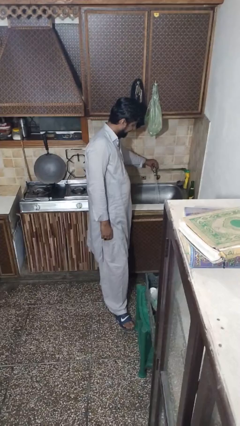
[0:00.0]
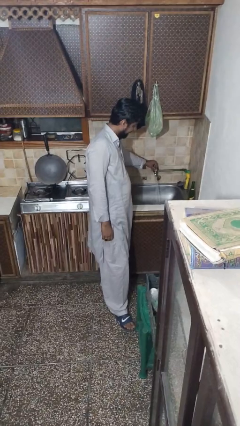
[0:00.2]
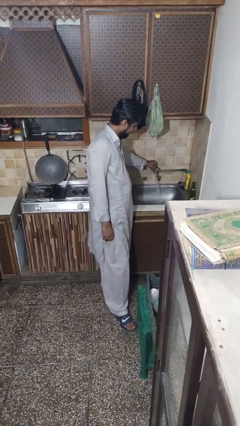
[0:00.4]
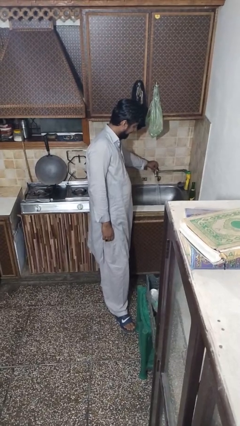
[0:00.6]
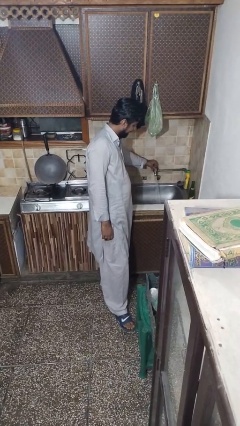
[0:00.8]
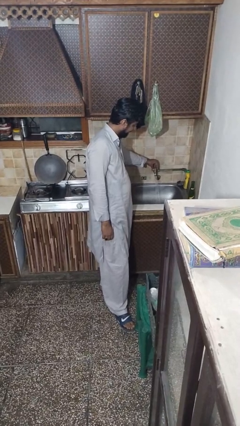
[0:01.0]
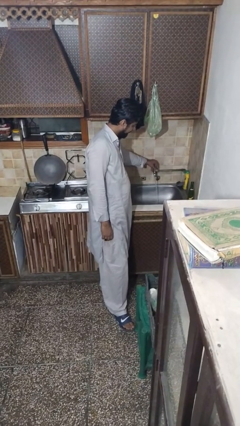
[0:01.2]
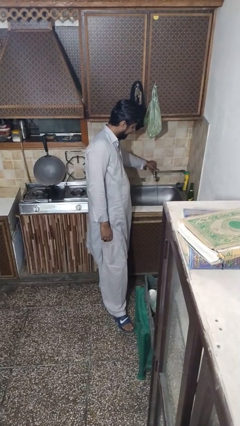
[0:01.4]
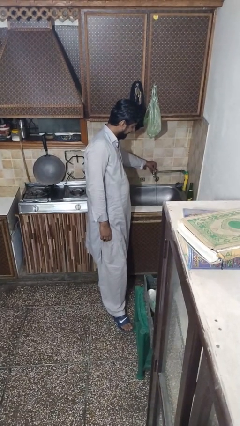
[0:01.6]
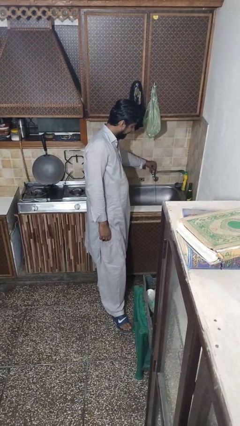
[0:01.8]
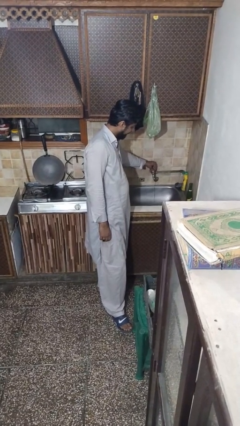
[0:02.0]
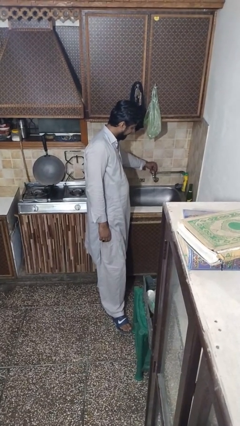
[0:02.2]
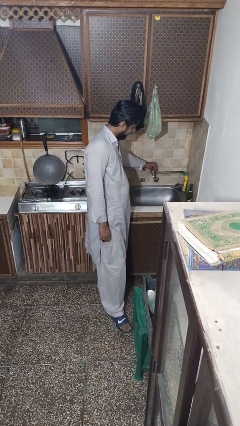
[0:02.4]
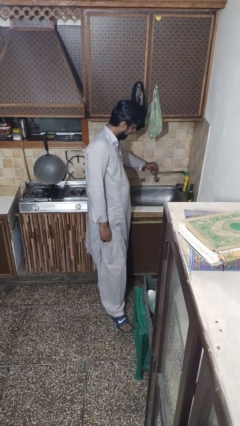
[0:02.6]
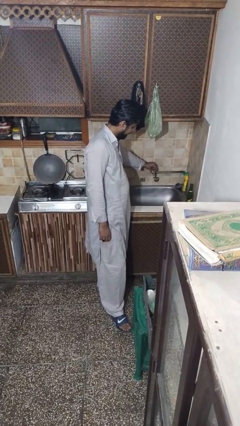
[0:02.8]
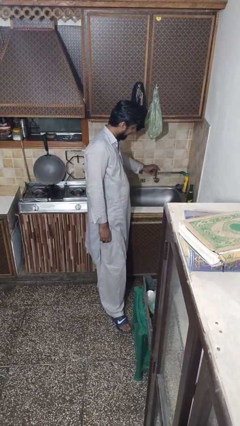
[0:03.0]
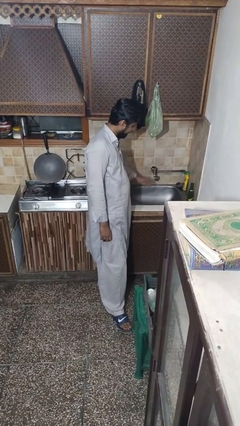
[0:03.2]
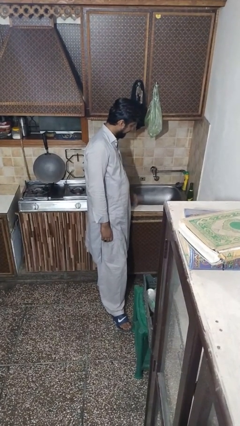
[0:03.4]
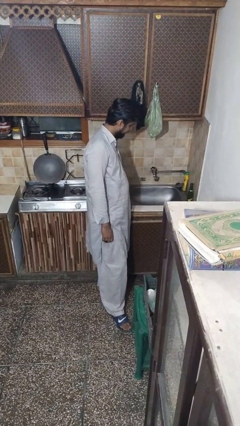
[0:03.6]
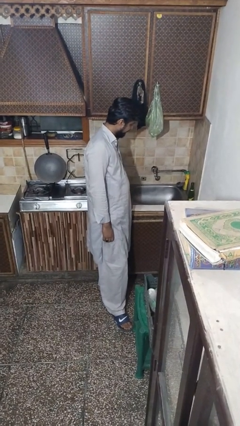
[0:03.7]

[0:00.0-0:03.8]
person turns off faucet

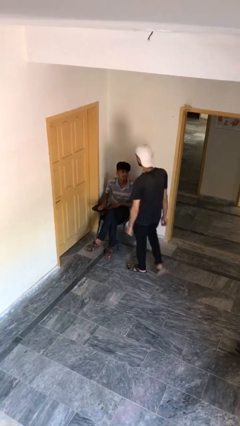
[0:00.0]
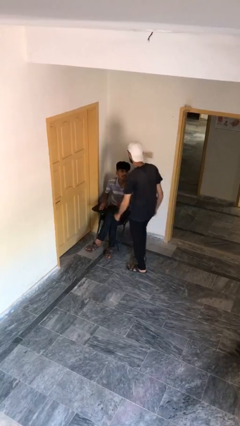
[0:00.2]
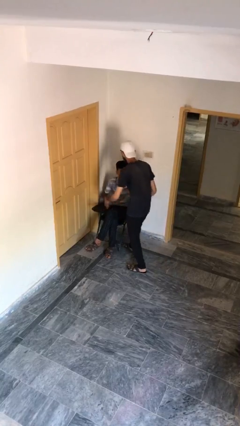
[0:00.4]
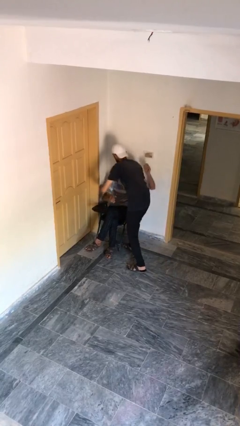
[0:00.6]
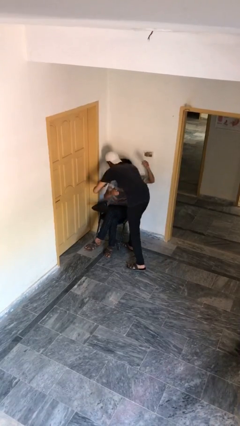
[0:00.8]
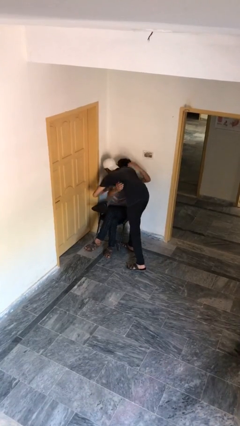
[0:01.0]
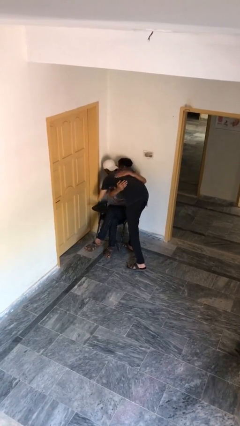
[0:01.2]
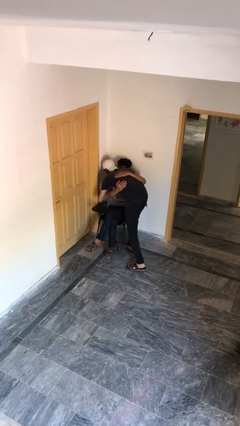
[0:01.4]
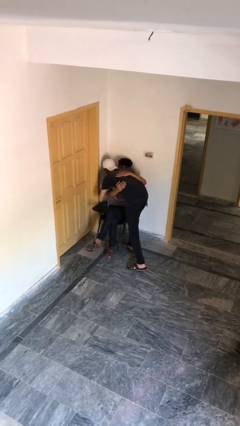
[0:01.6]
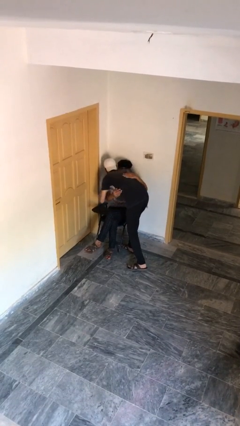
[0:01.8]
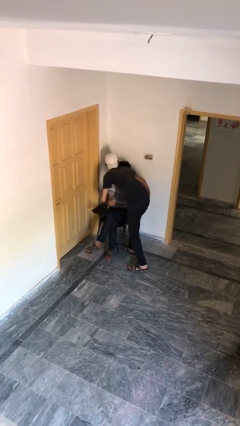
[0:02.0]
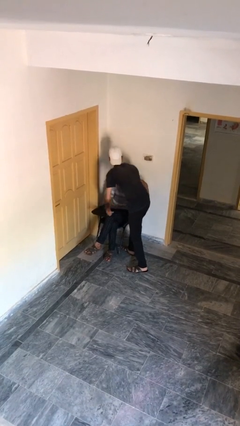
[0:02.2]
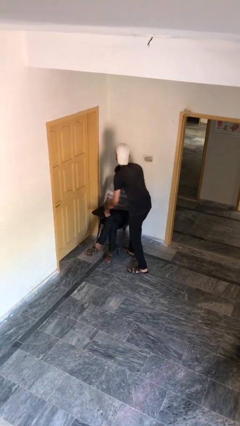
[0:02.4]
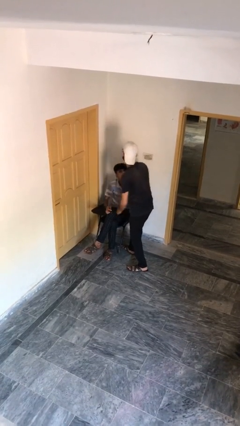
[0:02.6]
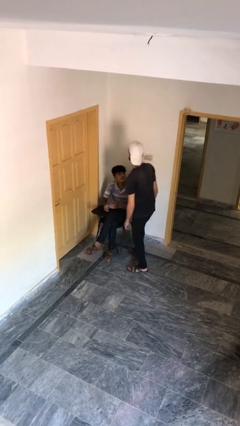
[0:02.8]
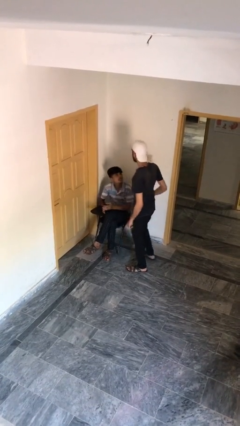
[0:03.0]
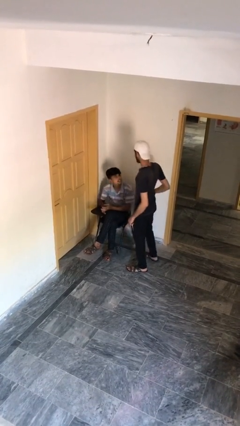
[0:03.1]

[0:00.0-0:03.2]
person embraces person

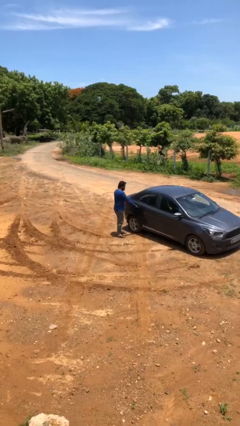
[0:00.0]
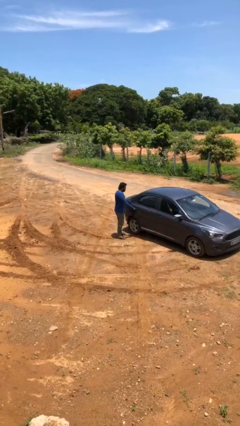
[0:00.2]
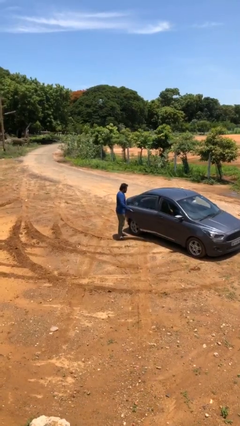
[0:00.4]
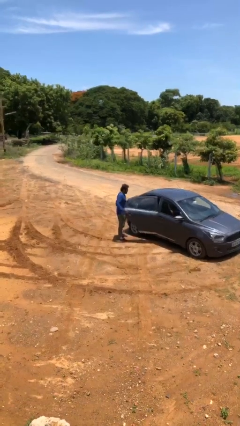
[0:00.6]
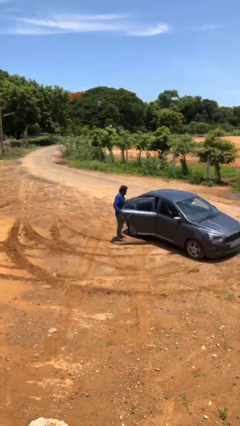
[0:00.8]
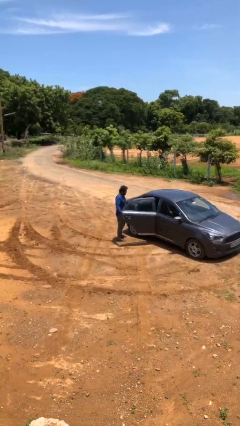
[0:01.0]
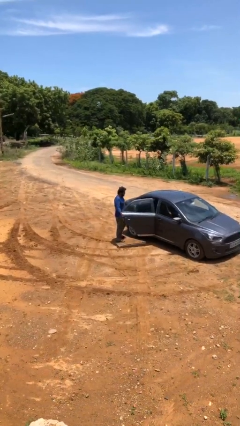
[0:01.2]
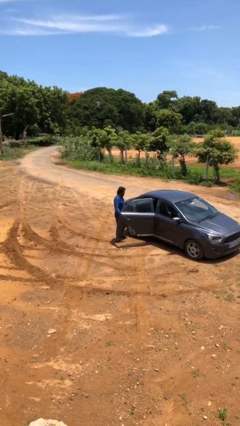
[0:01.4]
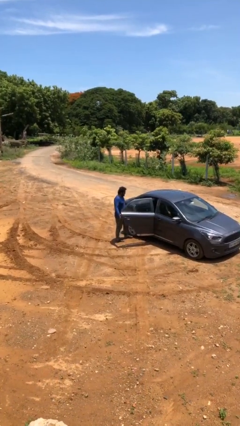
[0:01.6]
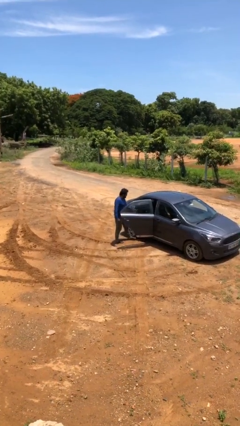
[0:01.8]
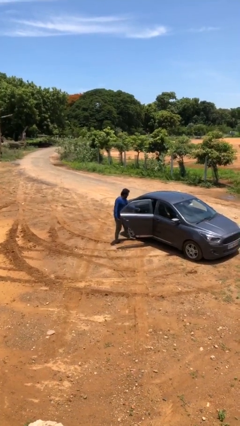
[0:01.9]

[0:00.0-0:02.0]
person opens car door

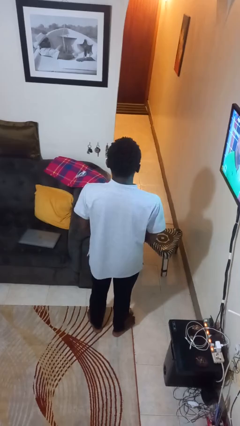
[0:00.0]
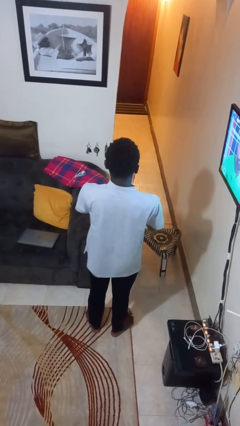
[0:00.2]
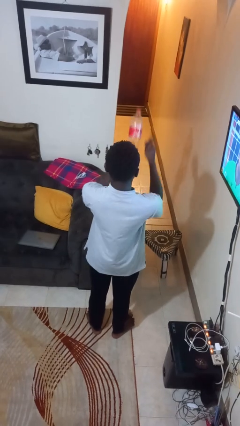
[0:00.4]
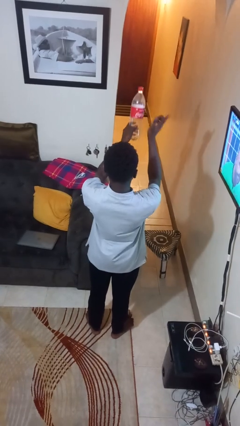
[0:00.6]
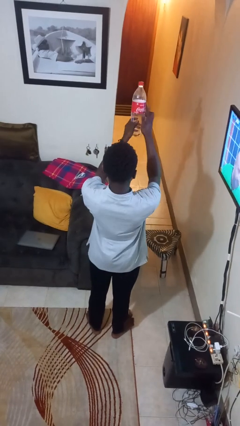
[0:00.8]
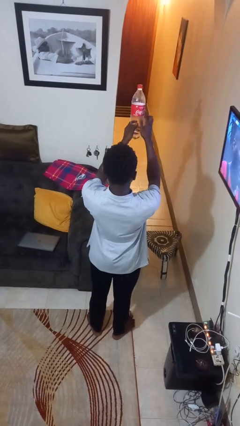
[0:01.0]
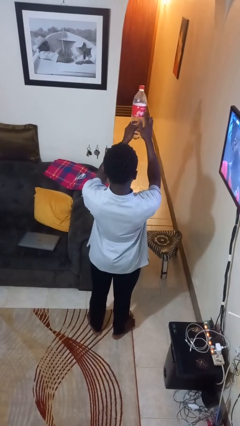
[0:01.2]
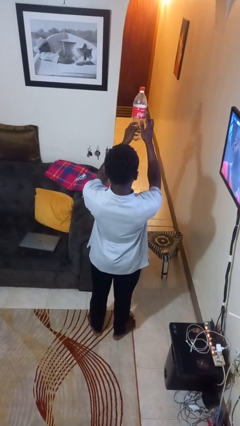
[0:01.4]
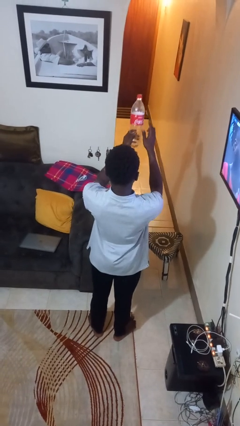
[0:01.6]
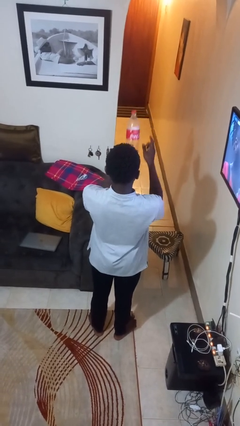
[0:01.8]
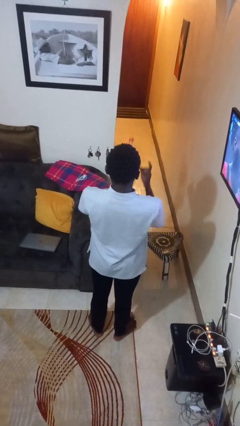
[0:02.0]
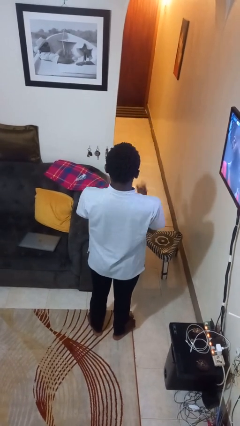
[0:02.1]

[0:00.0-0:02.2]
person taps object with finger

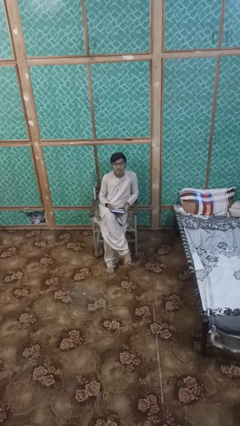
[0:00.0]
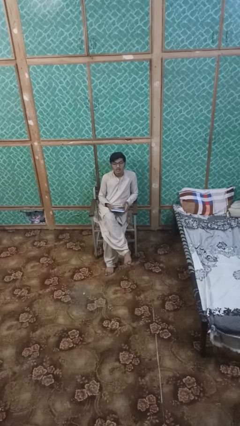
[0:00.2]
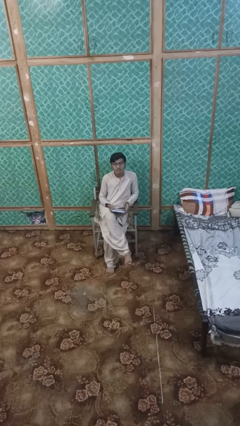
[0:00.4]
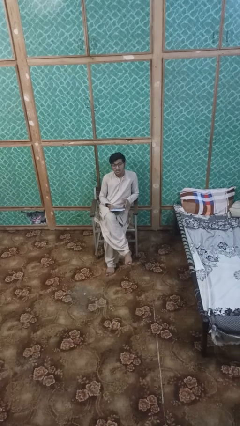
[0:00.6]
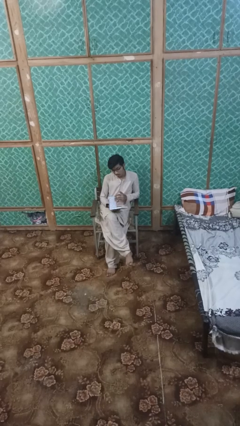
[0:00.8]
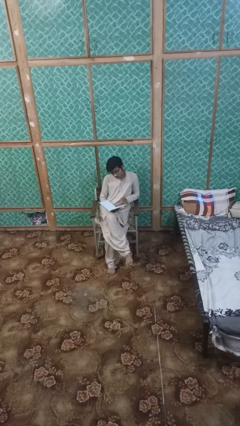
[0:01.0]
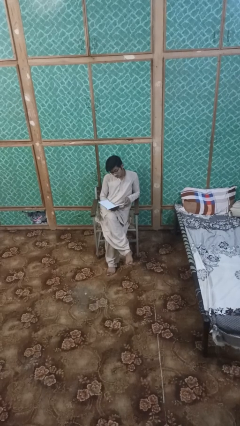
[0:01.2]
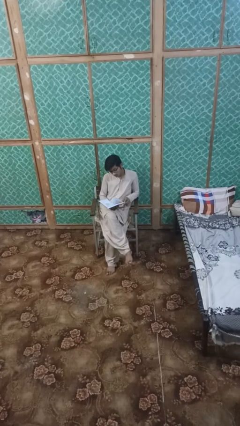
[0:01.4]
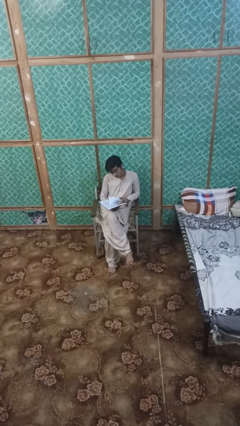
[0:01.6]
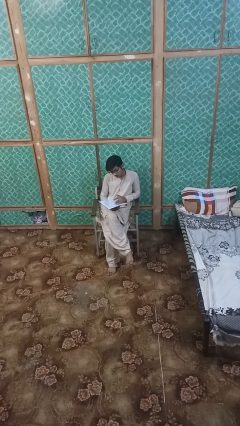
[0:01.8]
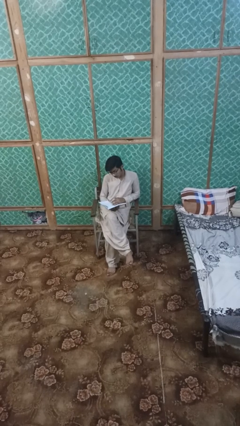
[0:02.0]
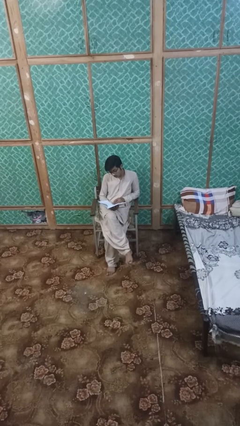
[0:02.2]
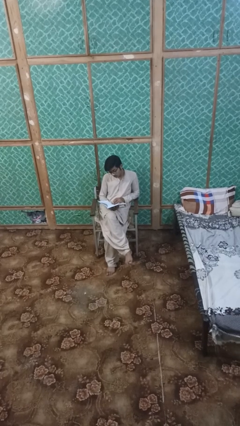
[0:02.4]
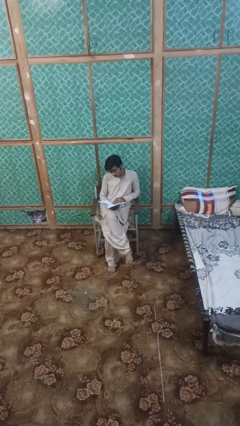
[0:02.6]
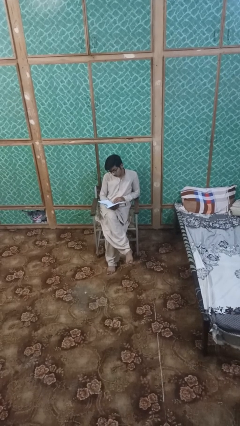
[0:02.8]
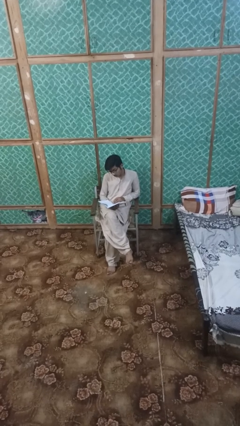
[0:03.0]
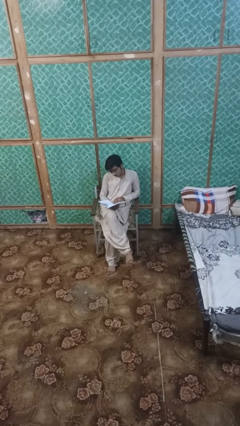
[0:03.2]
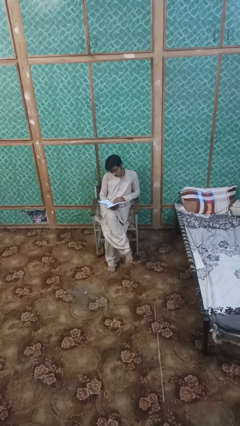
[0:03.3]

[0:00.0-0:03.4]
person reads magazine

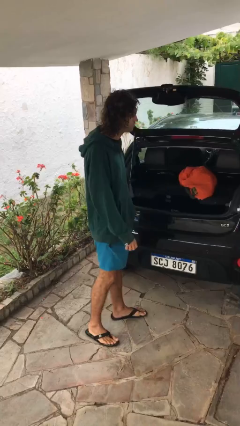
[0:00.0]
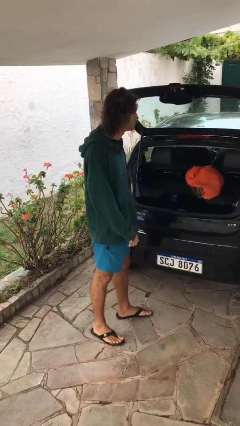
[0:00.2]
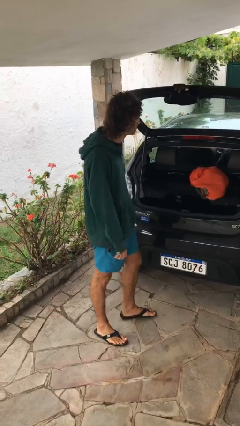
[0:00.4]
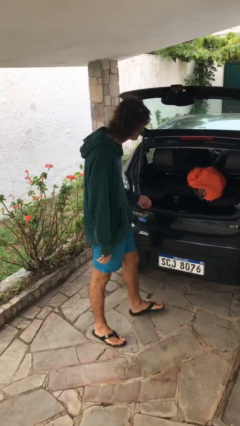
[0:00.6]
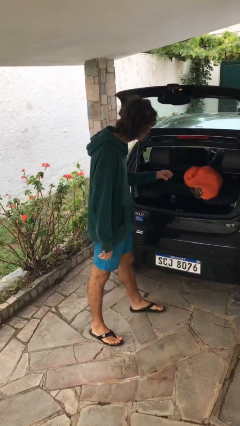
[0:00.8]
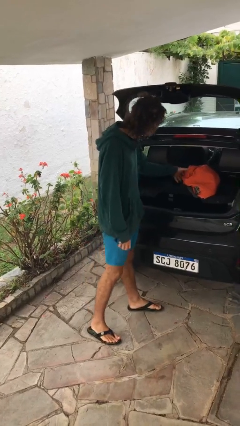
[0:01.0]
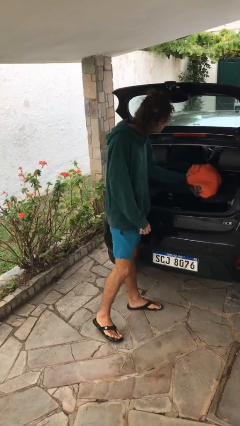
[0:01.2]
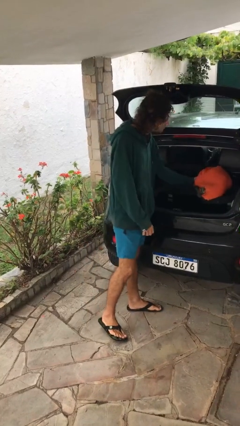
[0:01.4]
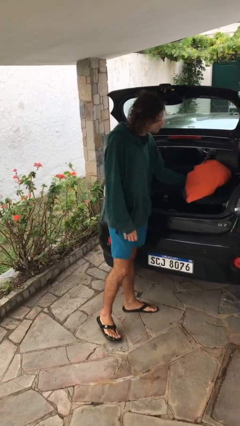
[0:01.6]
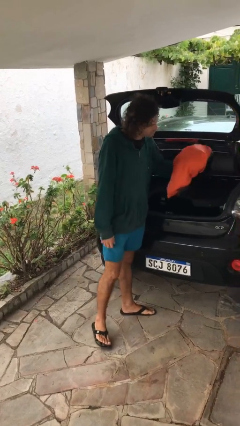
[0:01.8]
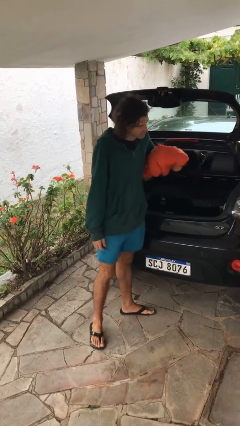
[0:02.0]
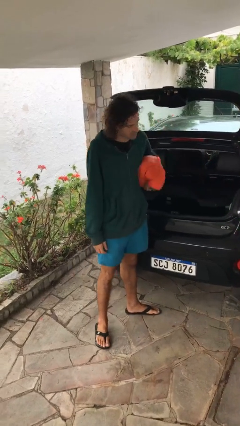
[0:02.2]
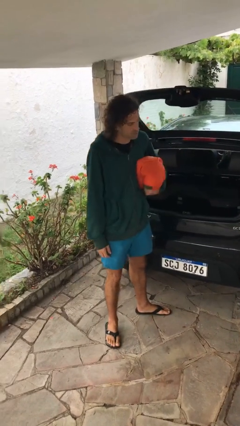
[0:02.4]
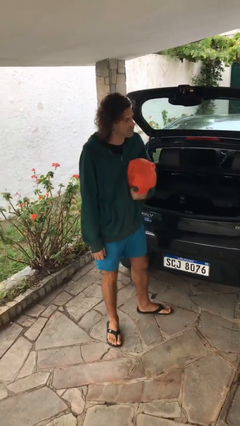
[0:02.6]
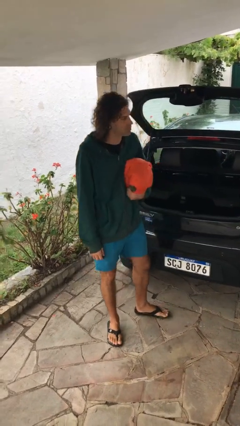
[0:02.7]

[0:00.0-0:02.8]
person unloads car

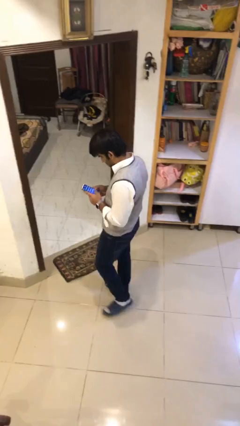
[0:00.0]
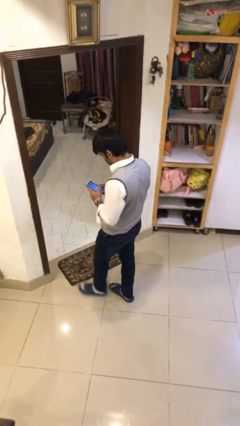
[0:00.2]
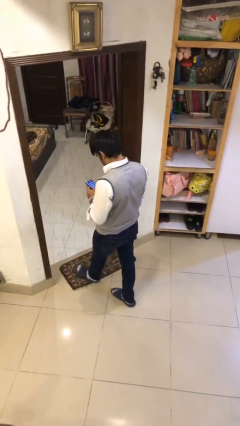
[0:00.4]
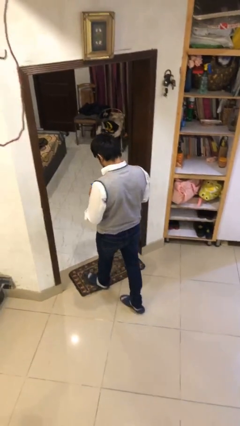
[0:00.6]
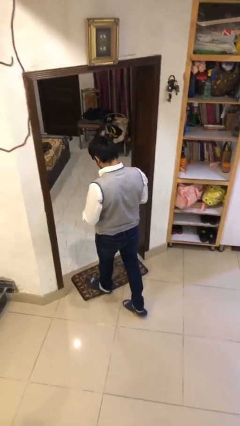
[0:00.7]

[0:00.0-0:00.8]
person exits scene through structure
